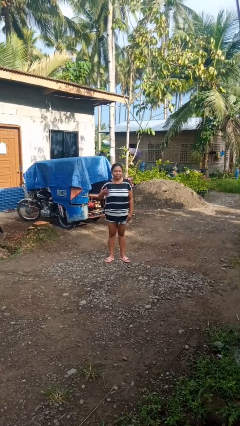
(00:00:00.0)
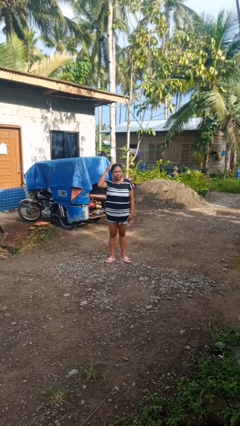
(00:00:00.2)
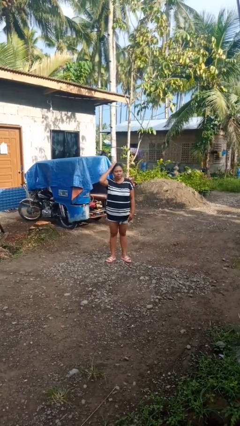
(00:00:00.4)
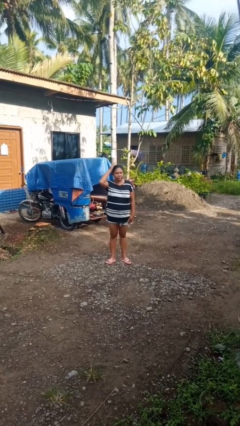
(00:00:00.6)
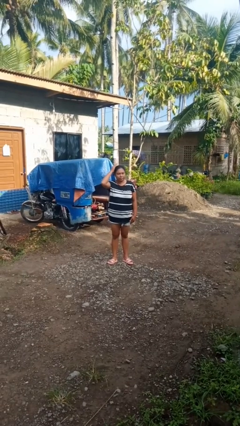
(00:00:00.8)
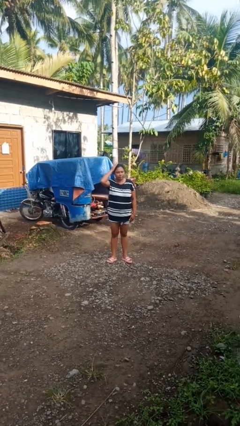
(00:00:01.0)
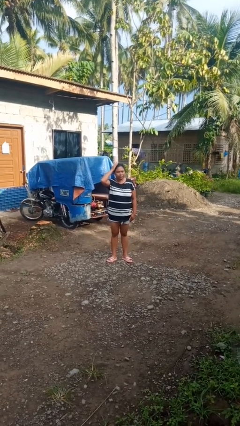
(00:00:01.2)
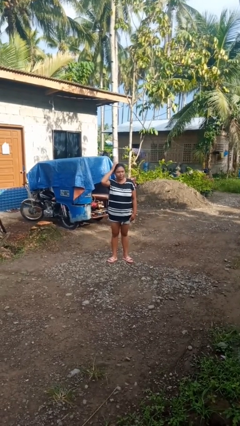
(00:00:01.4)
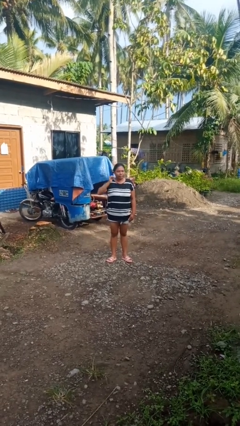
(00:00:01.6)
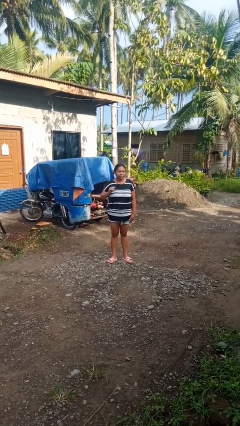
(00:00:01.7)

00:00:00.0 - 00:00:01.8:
person pats head

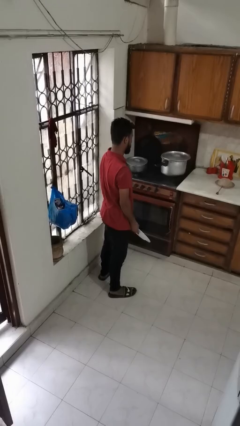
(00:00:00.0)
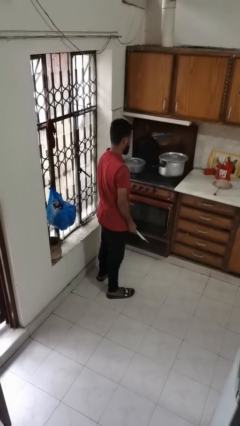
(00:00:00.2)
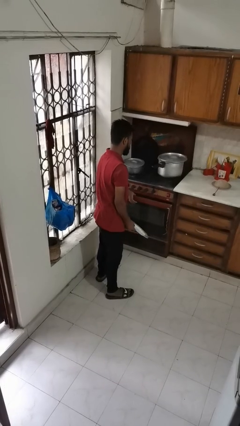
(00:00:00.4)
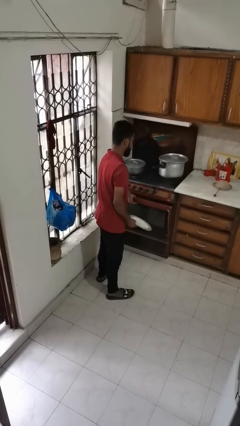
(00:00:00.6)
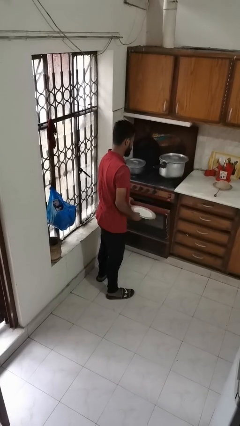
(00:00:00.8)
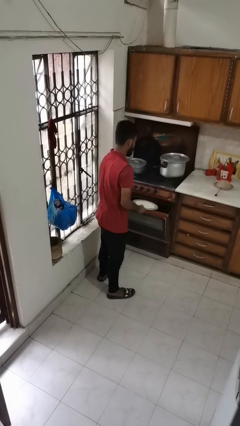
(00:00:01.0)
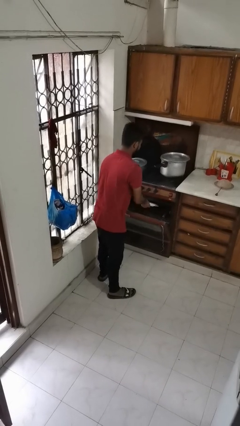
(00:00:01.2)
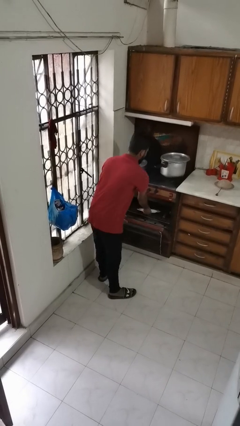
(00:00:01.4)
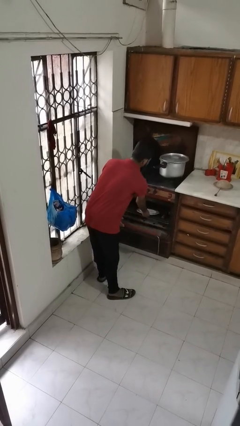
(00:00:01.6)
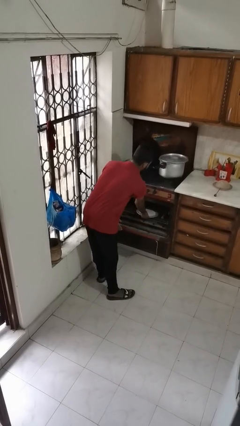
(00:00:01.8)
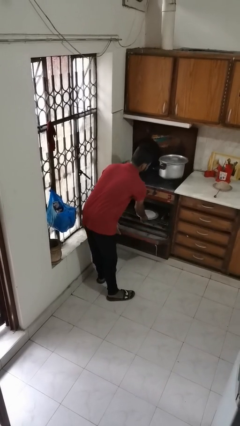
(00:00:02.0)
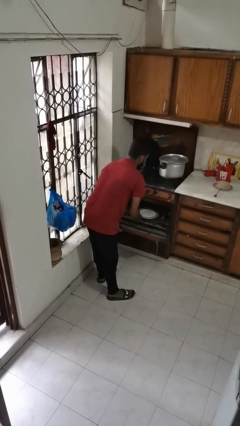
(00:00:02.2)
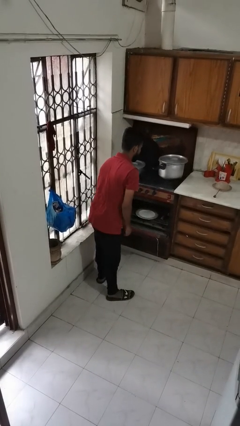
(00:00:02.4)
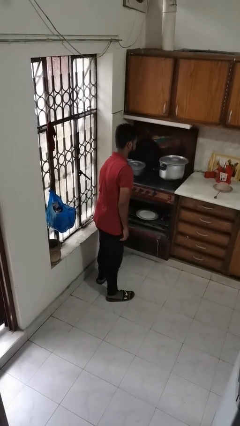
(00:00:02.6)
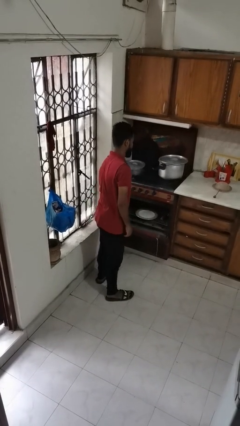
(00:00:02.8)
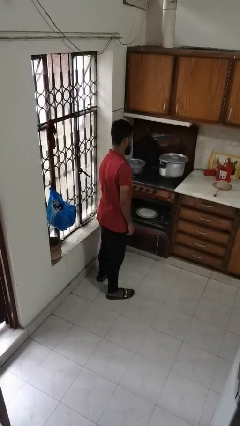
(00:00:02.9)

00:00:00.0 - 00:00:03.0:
person puts object into oven

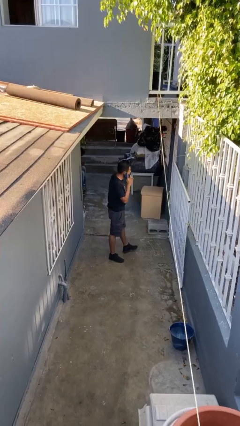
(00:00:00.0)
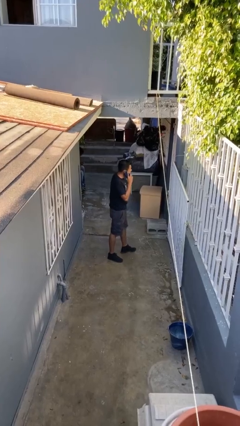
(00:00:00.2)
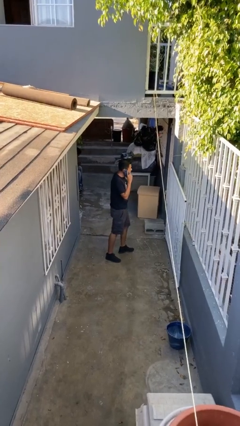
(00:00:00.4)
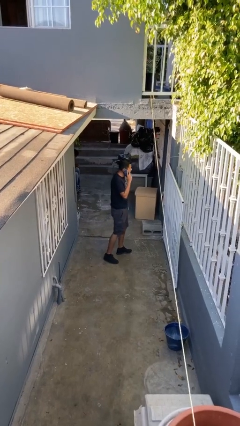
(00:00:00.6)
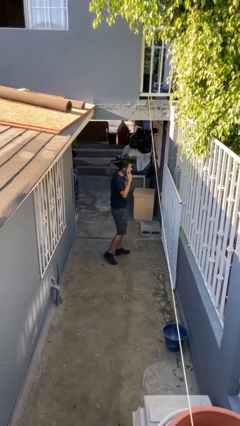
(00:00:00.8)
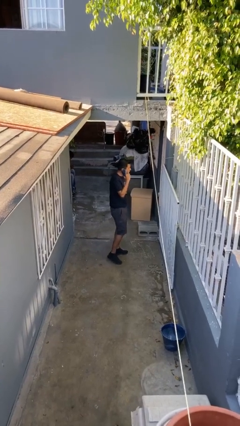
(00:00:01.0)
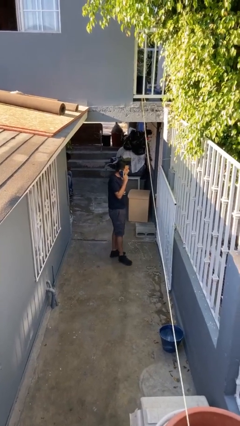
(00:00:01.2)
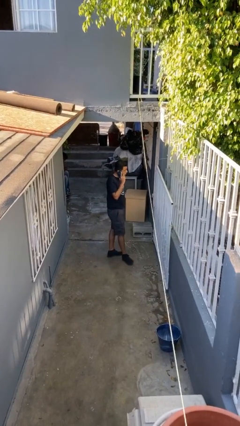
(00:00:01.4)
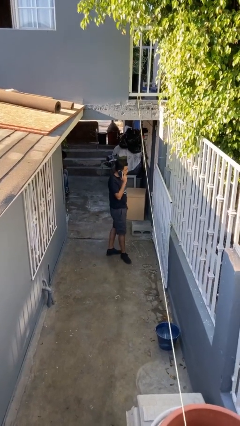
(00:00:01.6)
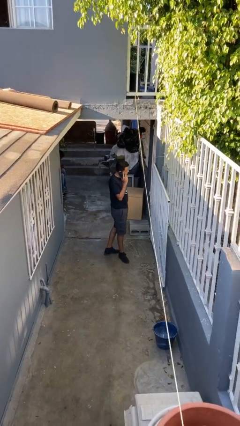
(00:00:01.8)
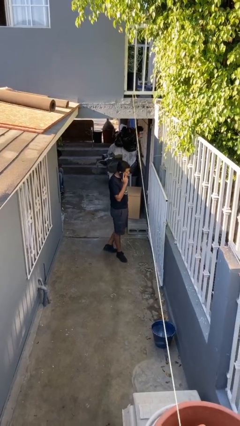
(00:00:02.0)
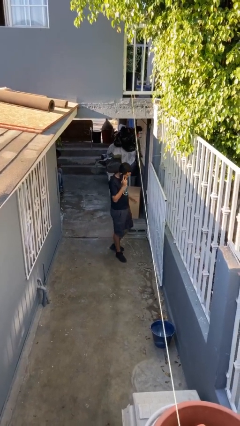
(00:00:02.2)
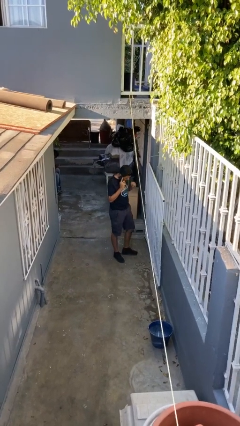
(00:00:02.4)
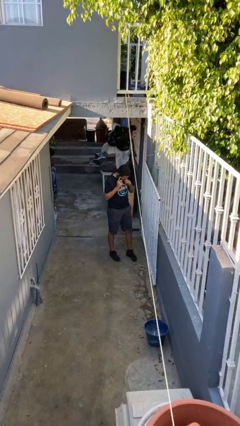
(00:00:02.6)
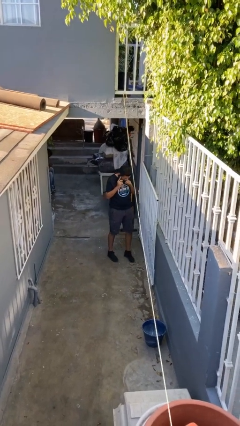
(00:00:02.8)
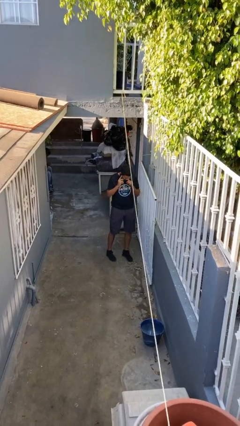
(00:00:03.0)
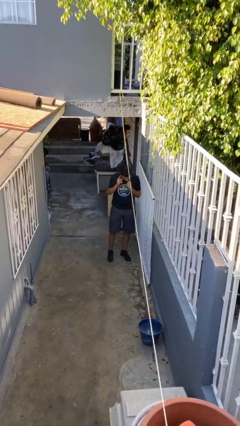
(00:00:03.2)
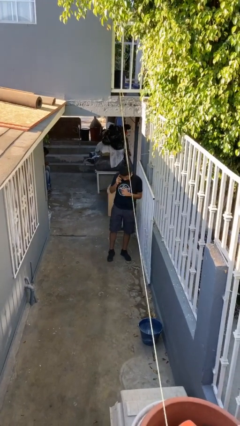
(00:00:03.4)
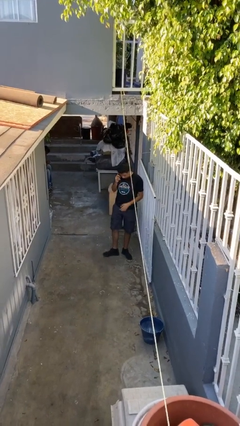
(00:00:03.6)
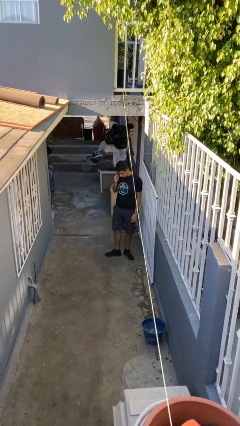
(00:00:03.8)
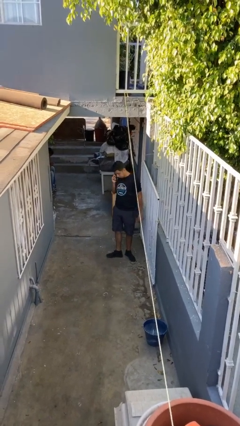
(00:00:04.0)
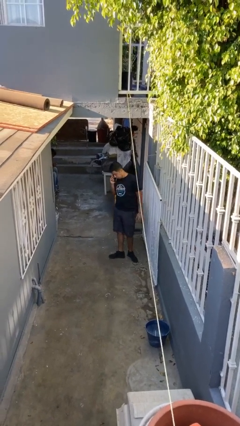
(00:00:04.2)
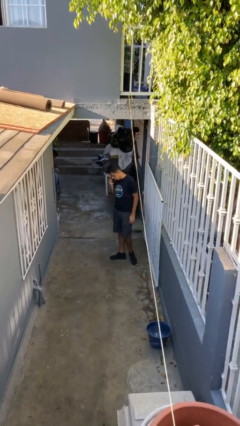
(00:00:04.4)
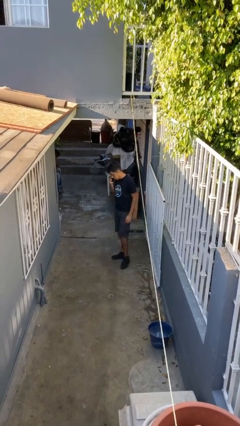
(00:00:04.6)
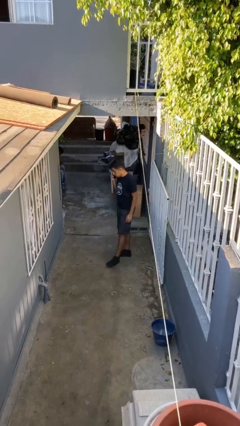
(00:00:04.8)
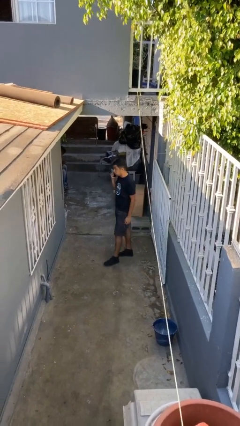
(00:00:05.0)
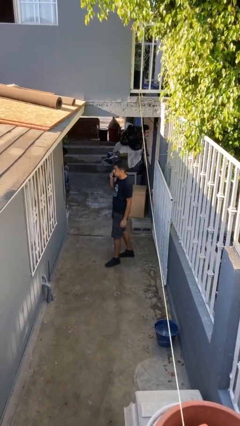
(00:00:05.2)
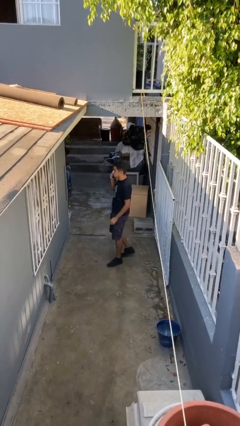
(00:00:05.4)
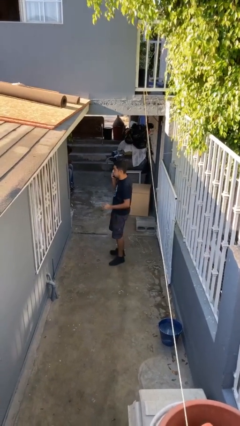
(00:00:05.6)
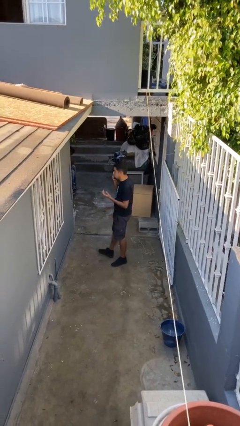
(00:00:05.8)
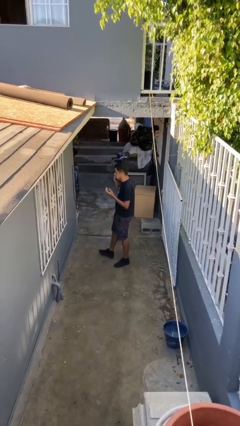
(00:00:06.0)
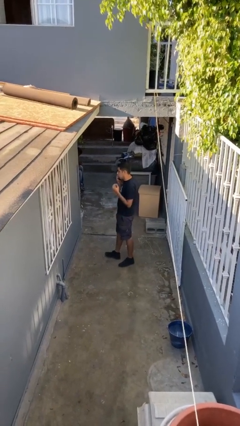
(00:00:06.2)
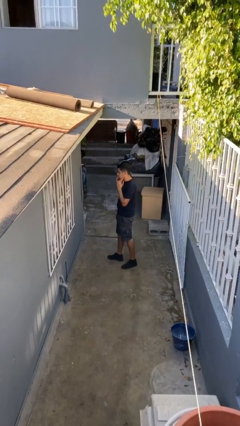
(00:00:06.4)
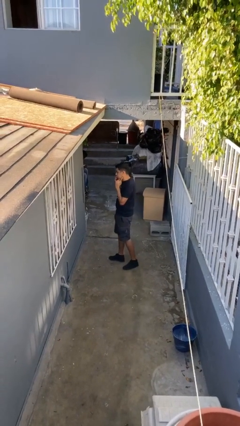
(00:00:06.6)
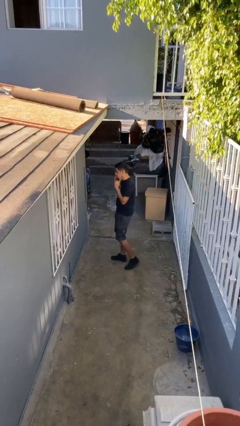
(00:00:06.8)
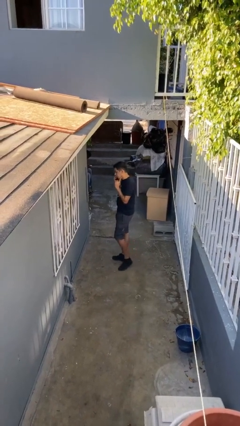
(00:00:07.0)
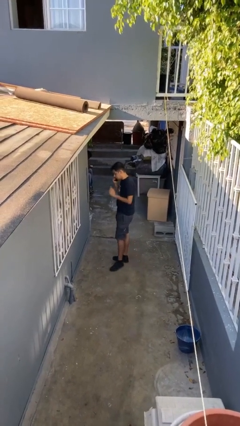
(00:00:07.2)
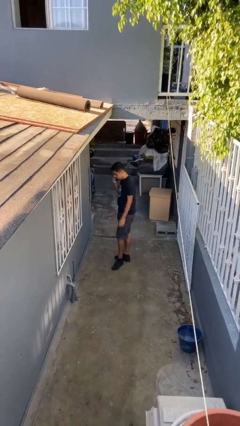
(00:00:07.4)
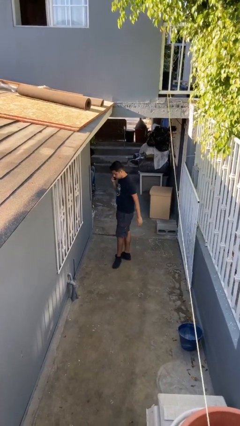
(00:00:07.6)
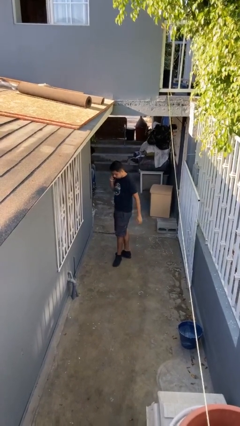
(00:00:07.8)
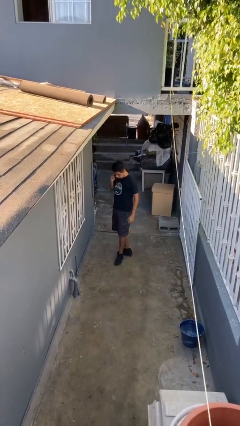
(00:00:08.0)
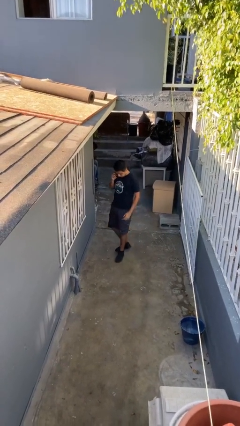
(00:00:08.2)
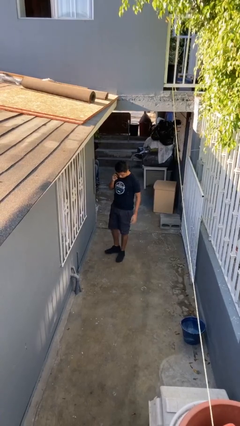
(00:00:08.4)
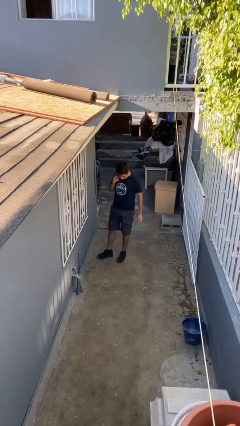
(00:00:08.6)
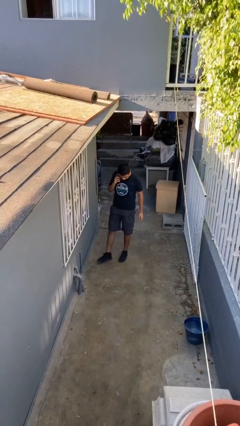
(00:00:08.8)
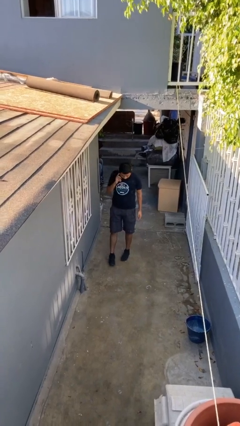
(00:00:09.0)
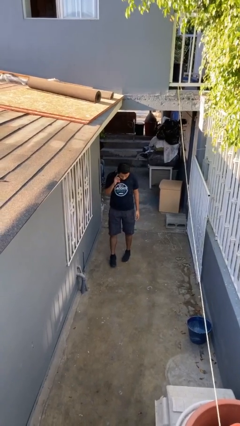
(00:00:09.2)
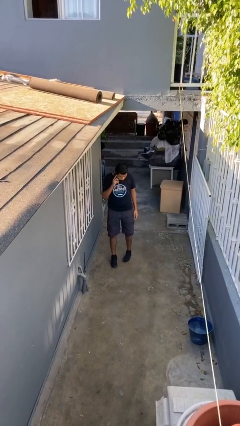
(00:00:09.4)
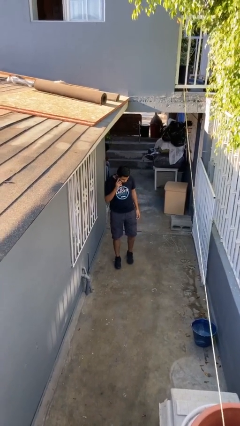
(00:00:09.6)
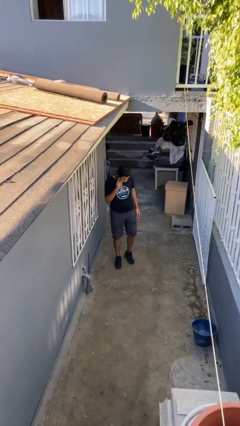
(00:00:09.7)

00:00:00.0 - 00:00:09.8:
person talks on phone

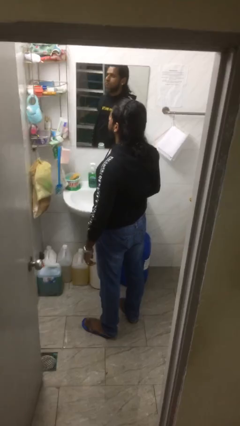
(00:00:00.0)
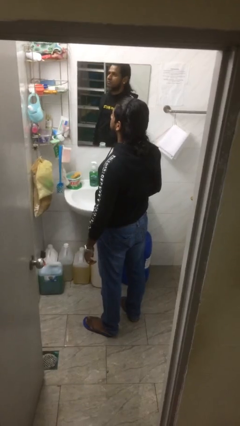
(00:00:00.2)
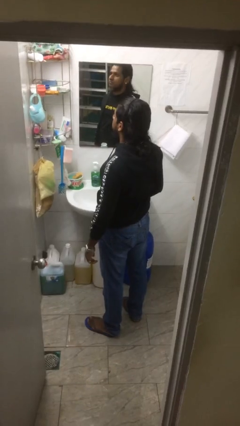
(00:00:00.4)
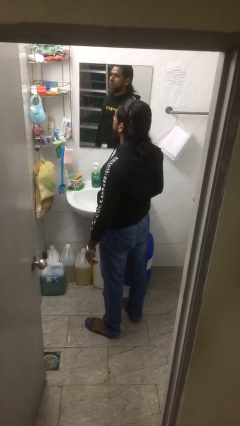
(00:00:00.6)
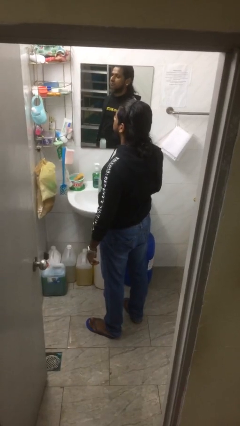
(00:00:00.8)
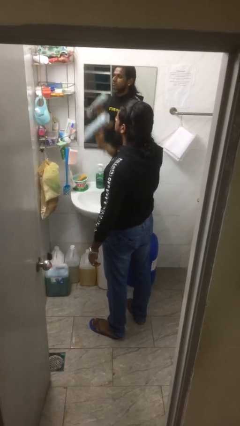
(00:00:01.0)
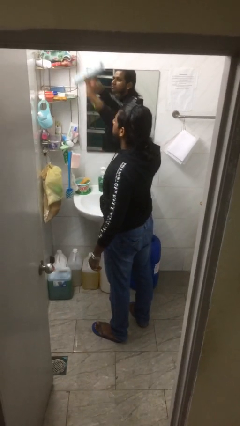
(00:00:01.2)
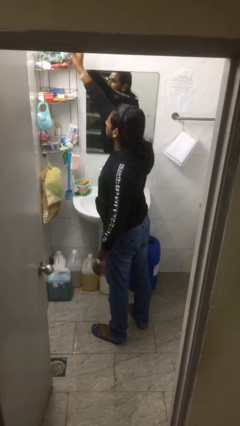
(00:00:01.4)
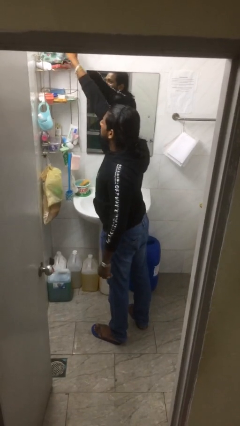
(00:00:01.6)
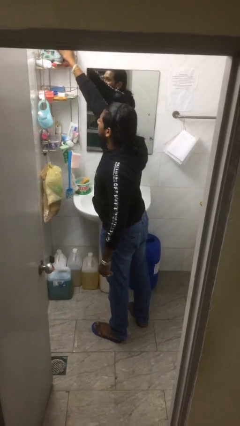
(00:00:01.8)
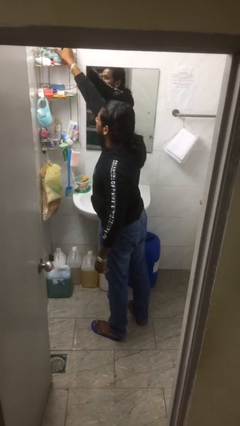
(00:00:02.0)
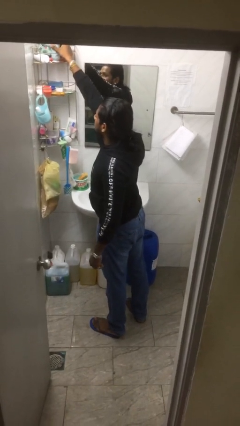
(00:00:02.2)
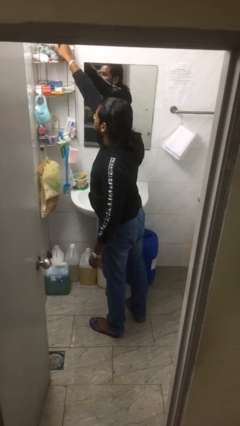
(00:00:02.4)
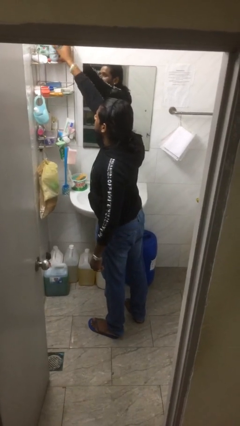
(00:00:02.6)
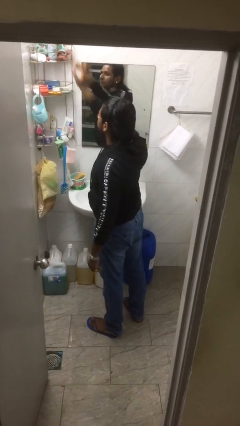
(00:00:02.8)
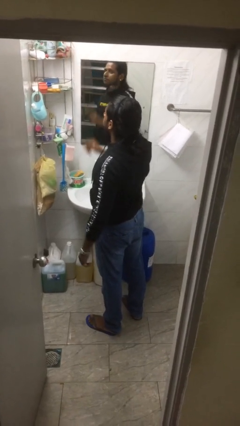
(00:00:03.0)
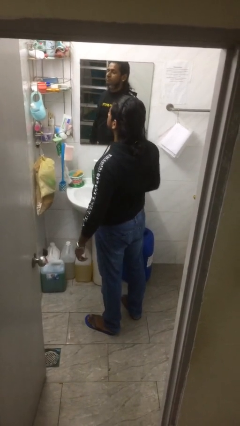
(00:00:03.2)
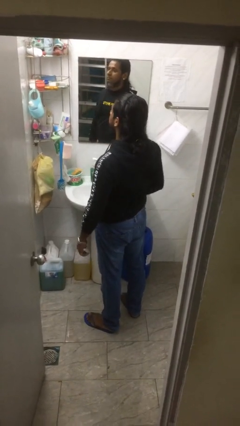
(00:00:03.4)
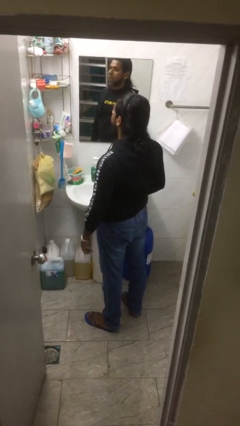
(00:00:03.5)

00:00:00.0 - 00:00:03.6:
person puts down object on countertop
